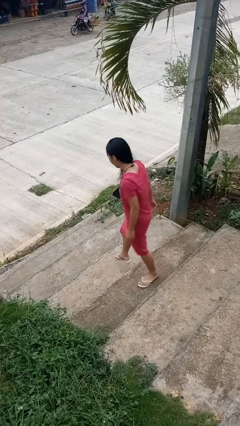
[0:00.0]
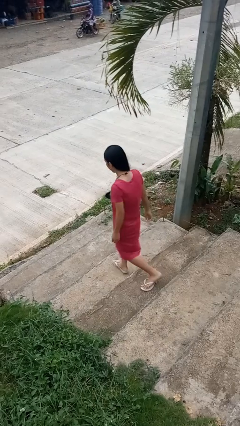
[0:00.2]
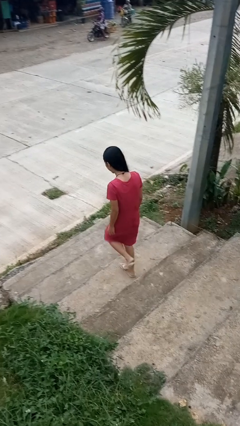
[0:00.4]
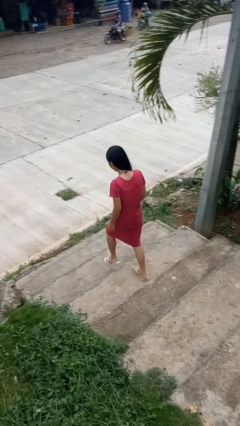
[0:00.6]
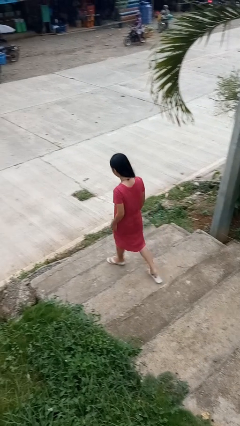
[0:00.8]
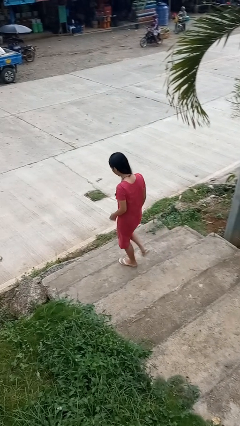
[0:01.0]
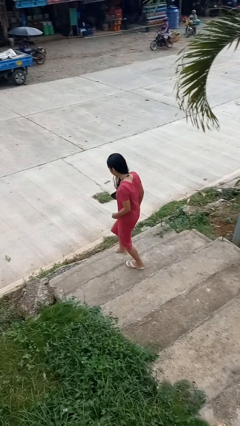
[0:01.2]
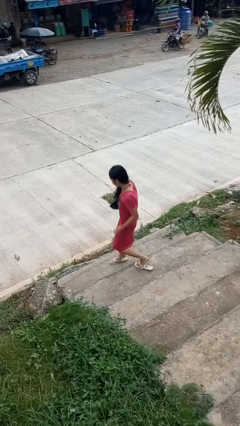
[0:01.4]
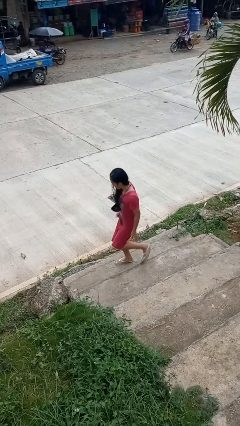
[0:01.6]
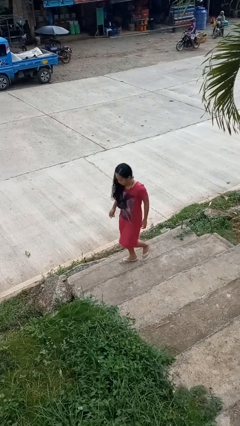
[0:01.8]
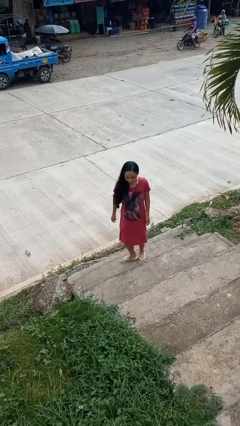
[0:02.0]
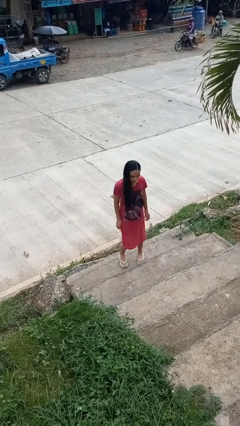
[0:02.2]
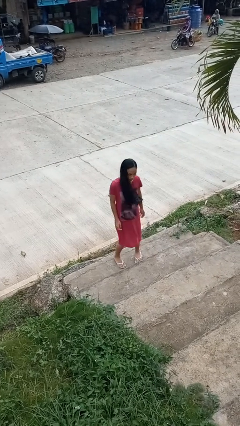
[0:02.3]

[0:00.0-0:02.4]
person climbs down stairs

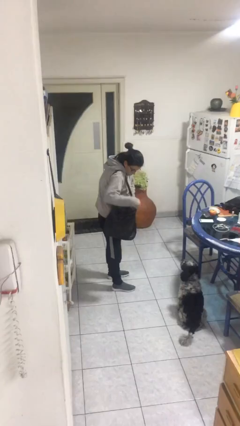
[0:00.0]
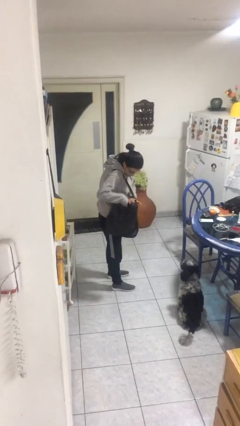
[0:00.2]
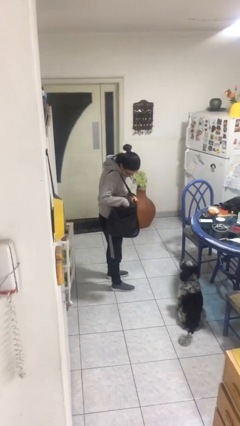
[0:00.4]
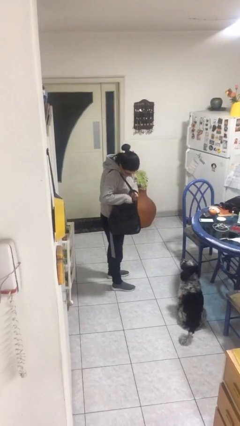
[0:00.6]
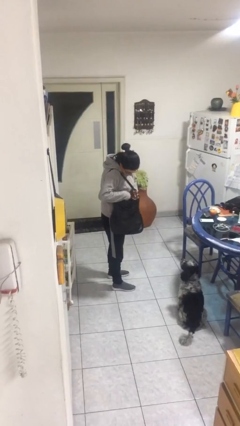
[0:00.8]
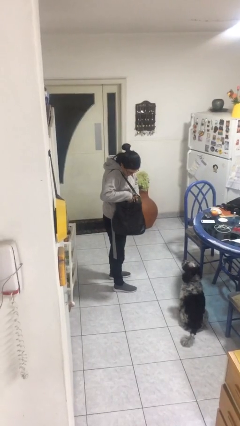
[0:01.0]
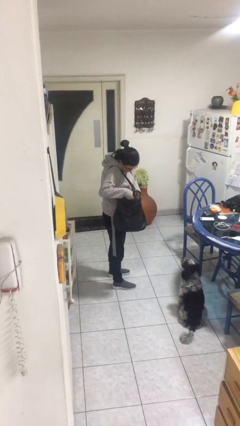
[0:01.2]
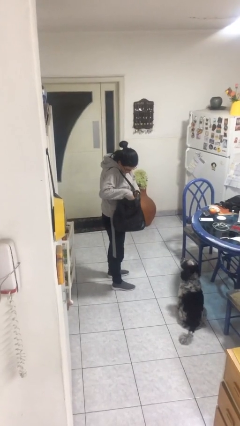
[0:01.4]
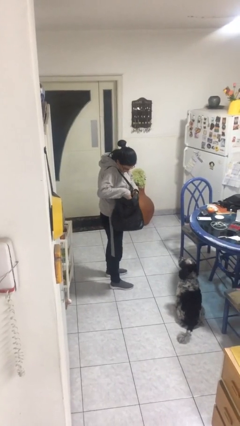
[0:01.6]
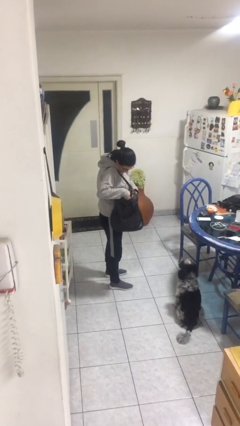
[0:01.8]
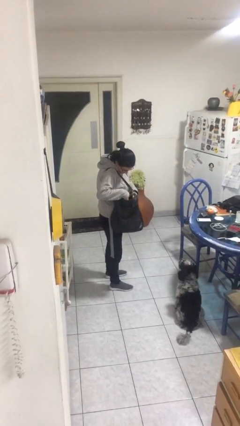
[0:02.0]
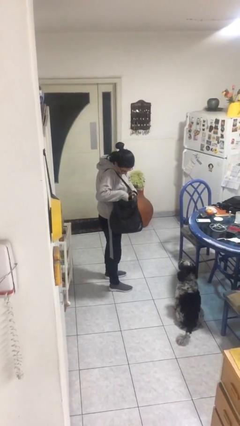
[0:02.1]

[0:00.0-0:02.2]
person searches in purse

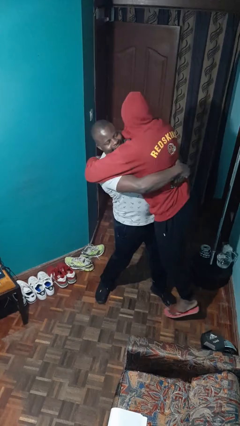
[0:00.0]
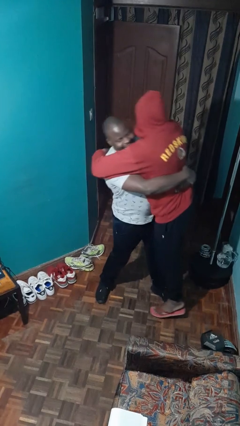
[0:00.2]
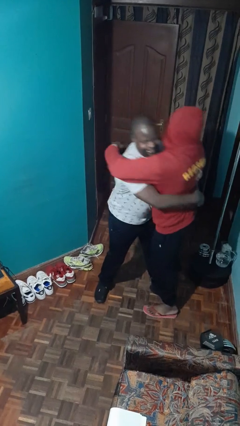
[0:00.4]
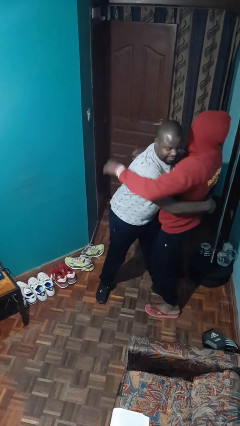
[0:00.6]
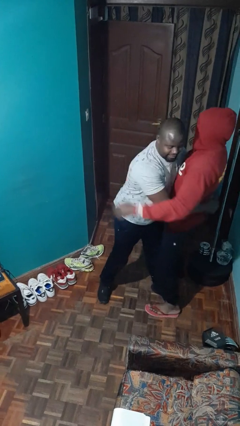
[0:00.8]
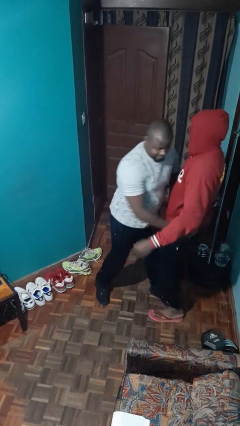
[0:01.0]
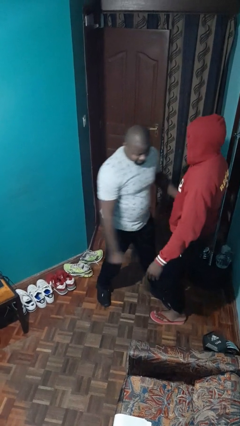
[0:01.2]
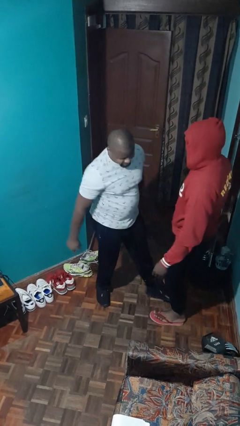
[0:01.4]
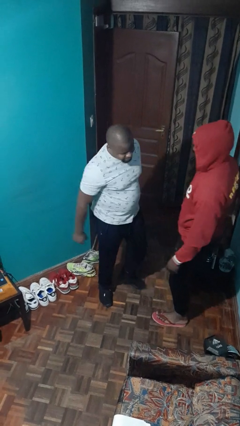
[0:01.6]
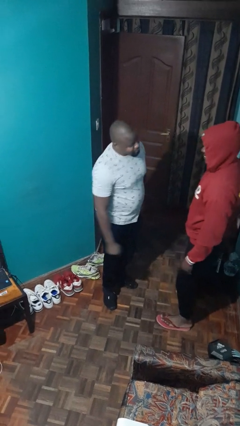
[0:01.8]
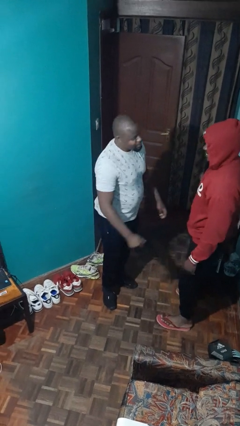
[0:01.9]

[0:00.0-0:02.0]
person puts down person

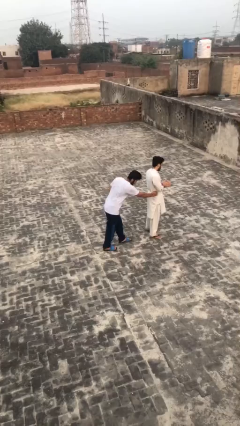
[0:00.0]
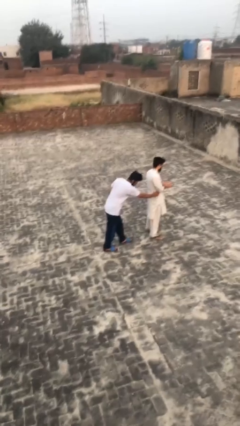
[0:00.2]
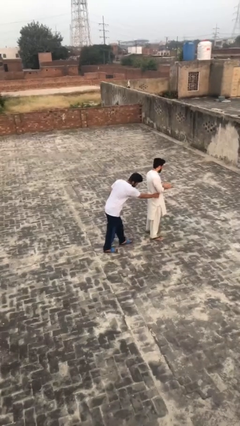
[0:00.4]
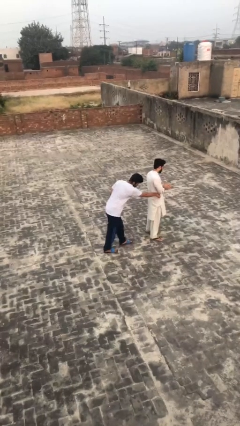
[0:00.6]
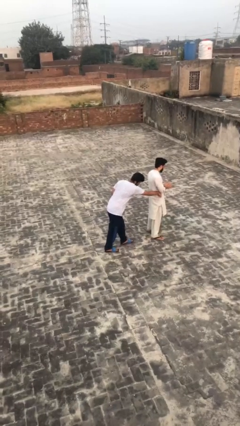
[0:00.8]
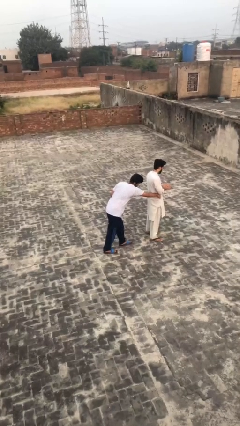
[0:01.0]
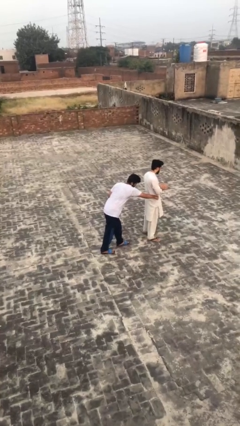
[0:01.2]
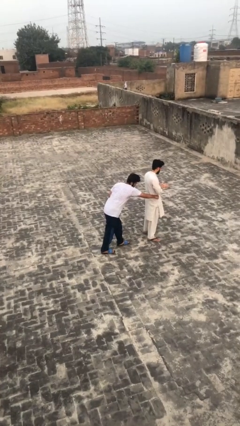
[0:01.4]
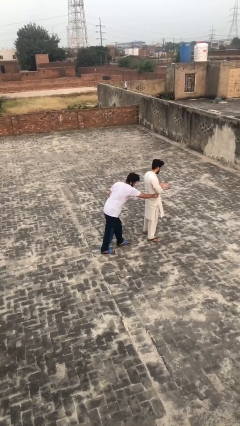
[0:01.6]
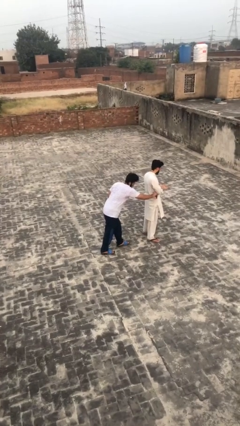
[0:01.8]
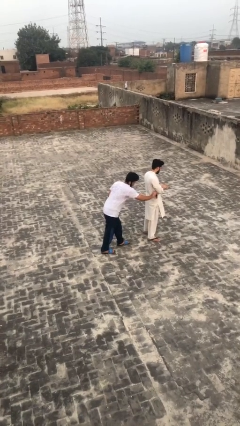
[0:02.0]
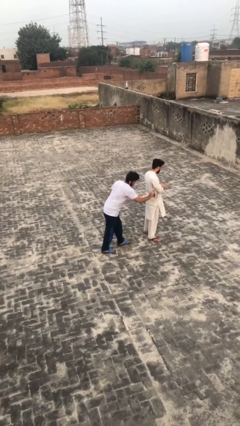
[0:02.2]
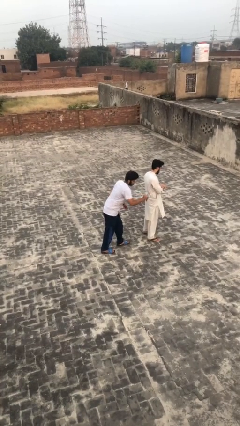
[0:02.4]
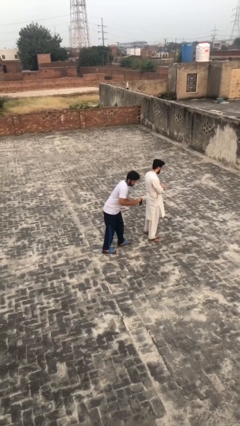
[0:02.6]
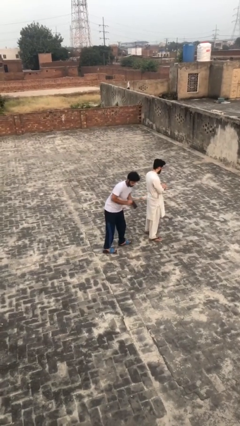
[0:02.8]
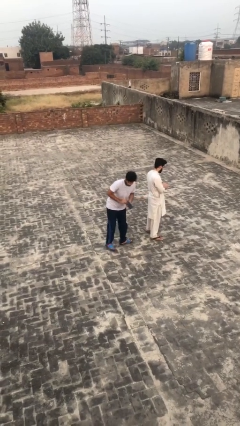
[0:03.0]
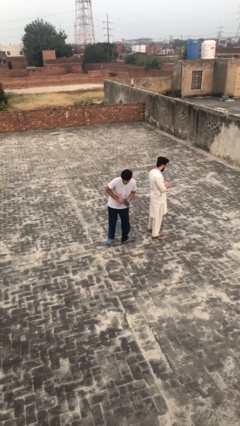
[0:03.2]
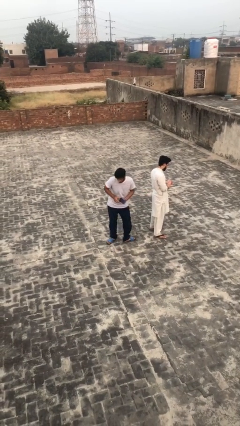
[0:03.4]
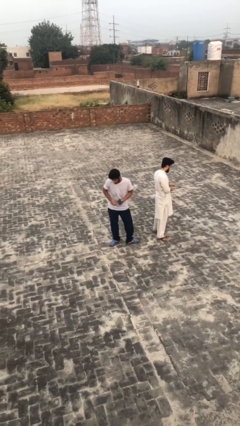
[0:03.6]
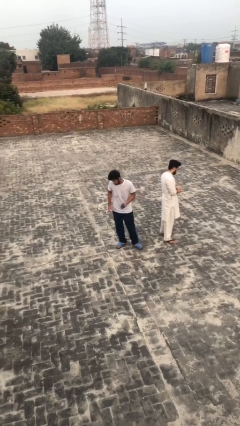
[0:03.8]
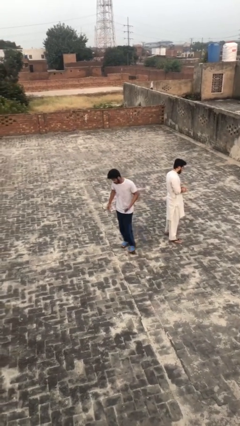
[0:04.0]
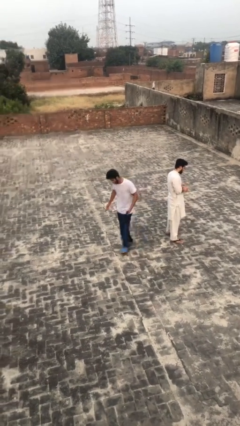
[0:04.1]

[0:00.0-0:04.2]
person steals object from person

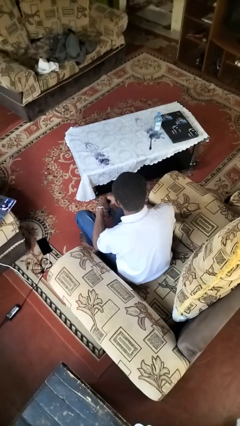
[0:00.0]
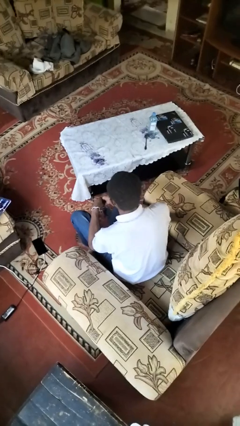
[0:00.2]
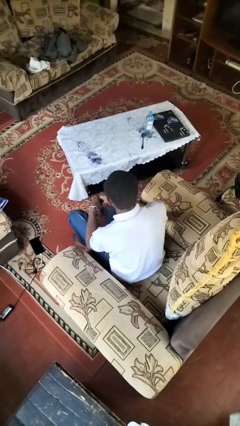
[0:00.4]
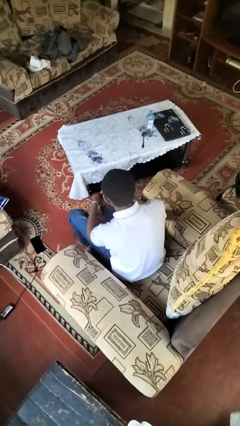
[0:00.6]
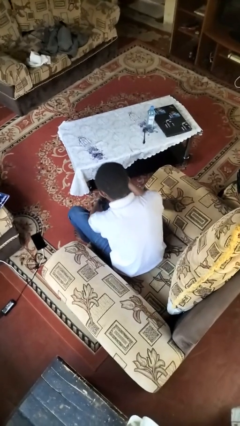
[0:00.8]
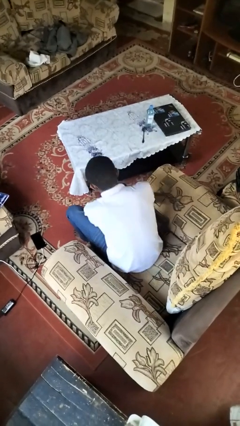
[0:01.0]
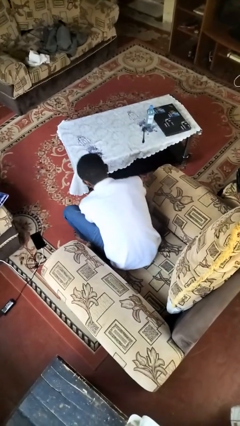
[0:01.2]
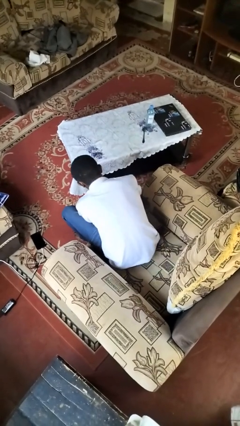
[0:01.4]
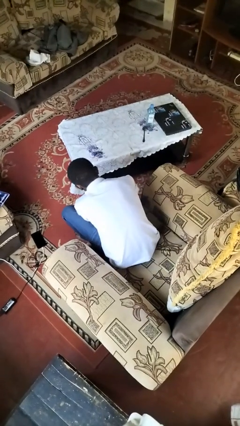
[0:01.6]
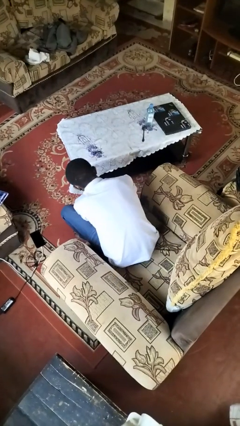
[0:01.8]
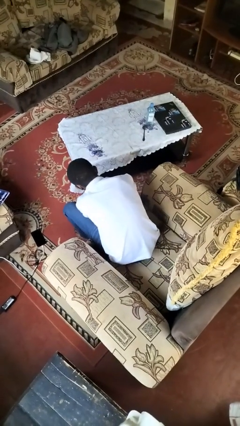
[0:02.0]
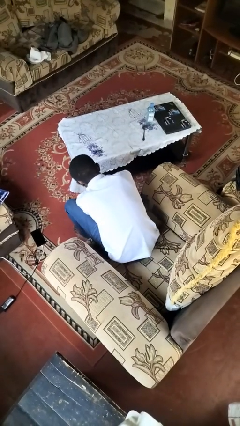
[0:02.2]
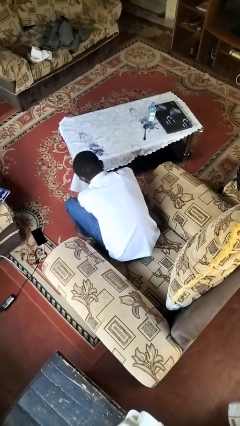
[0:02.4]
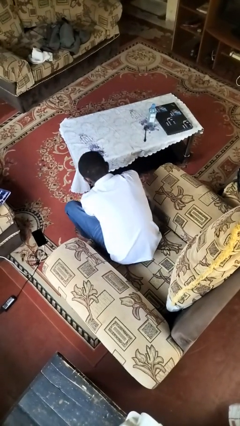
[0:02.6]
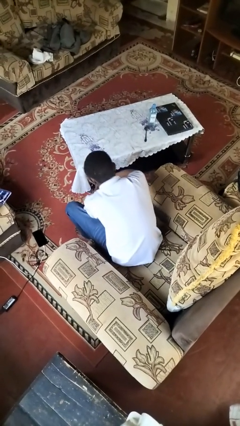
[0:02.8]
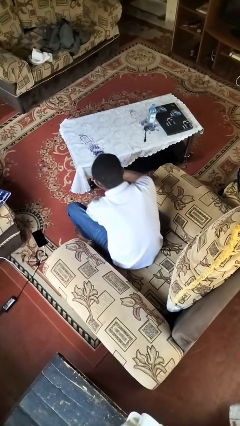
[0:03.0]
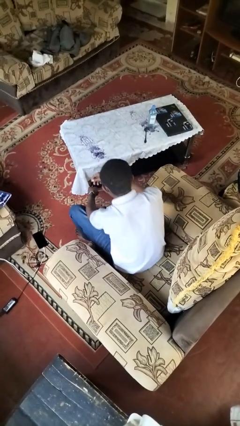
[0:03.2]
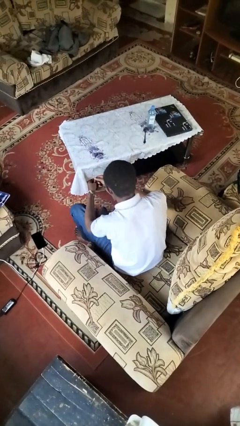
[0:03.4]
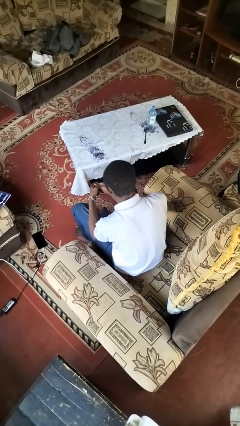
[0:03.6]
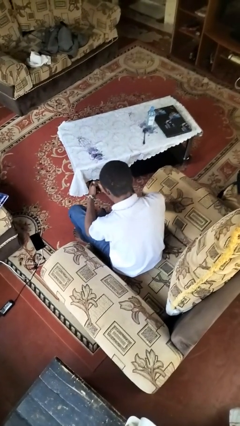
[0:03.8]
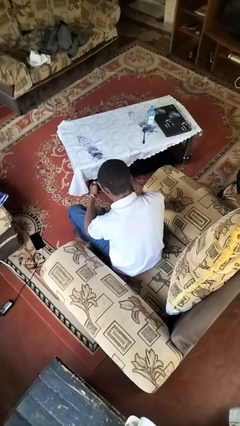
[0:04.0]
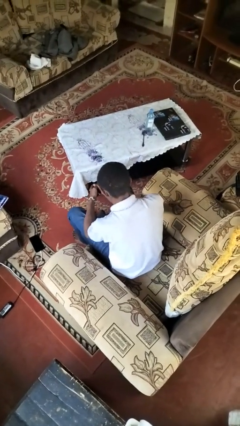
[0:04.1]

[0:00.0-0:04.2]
person takes off socks

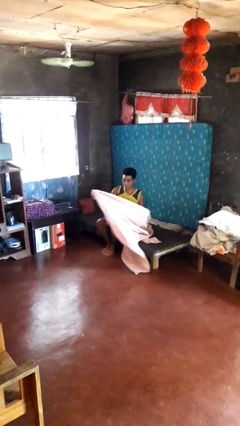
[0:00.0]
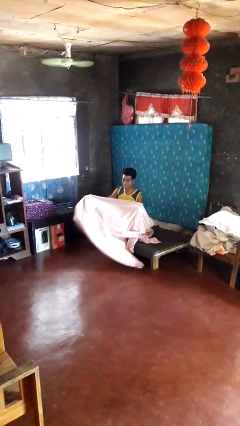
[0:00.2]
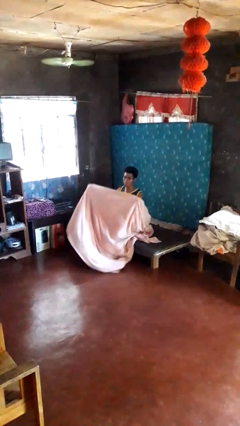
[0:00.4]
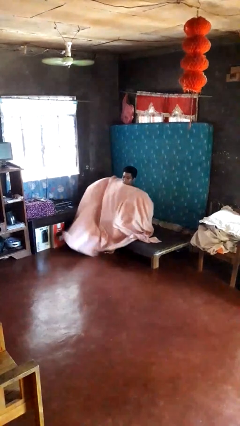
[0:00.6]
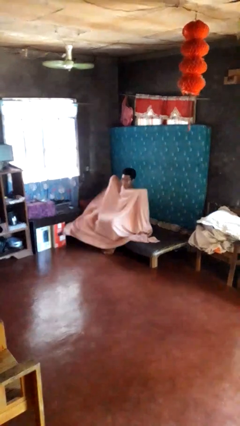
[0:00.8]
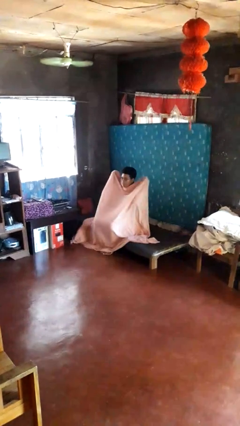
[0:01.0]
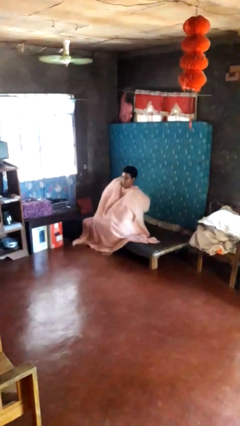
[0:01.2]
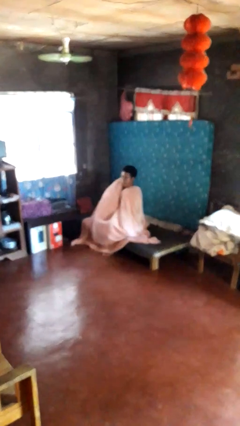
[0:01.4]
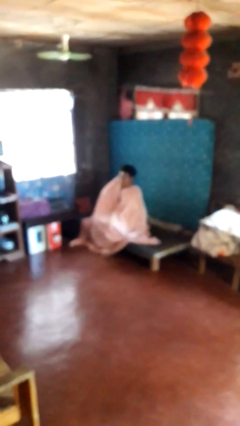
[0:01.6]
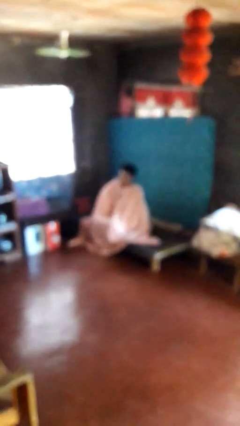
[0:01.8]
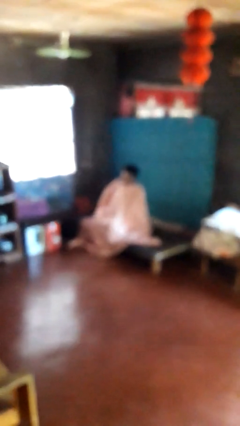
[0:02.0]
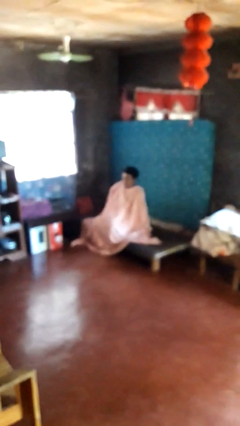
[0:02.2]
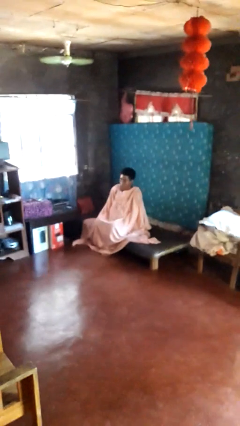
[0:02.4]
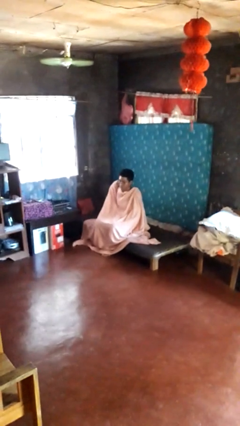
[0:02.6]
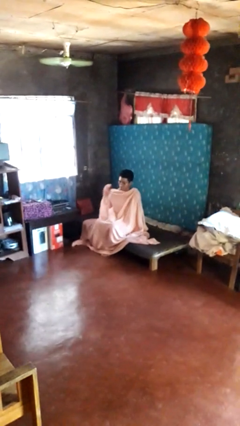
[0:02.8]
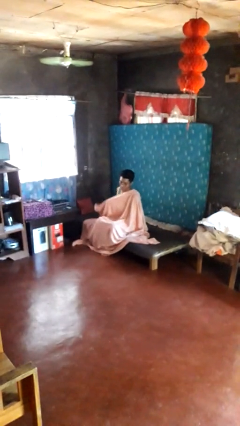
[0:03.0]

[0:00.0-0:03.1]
person covers with blanket
